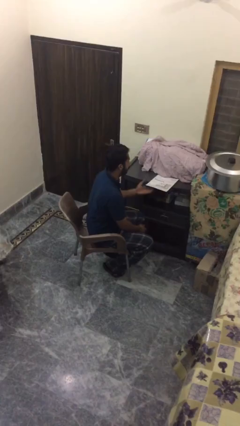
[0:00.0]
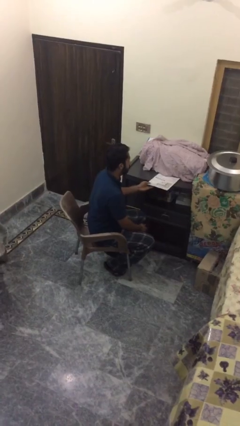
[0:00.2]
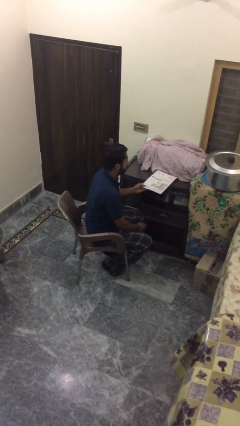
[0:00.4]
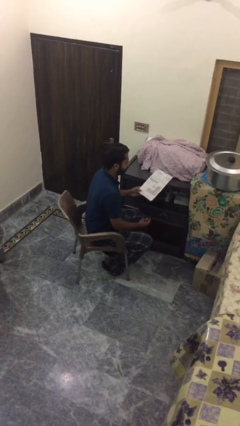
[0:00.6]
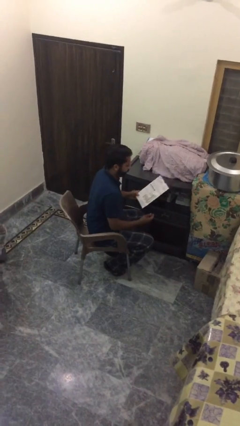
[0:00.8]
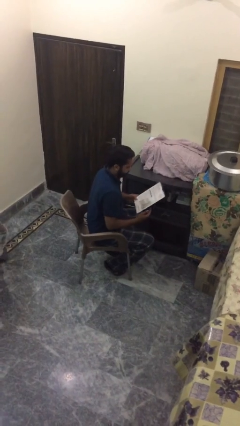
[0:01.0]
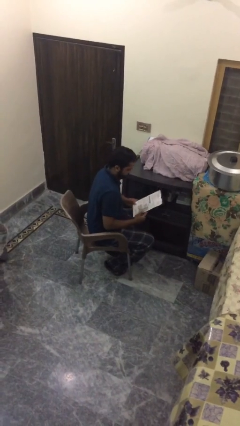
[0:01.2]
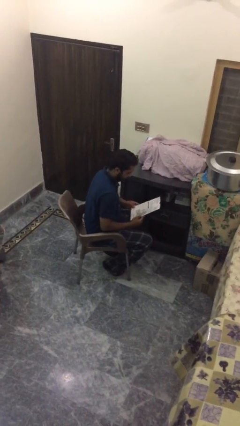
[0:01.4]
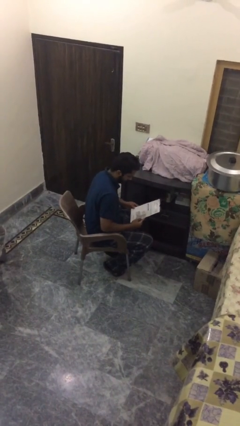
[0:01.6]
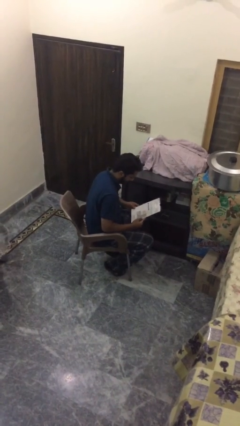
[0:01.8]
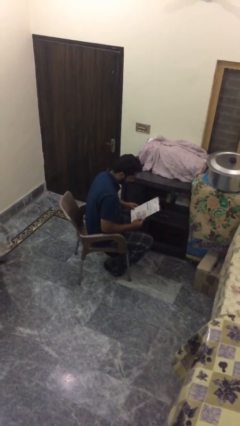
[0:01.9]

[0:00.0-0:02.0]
person picks up object from table

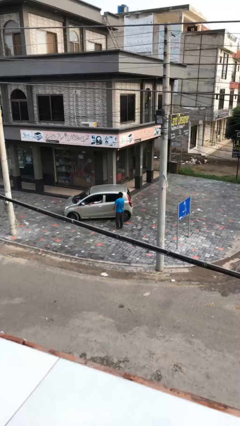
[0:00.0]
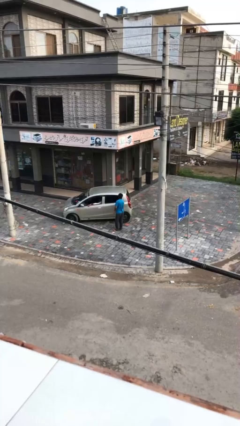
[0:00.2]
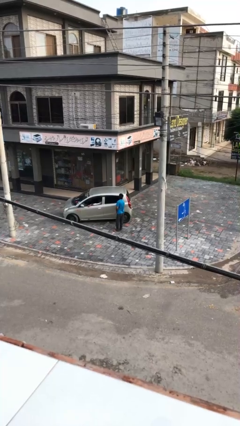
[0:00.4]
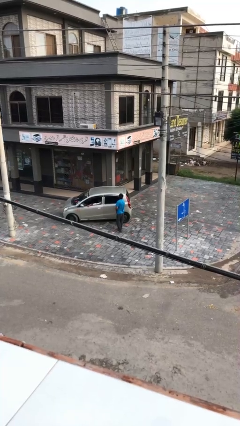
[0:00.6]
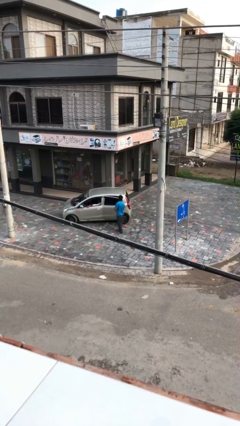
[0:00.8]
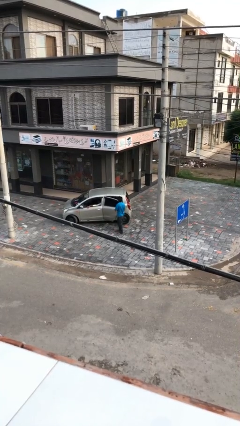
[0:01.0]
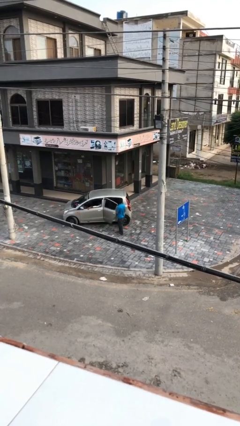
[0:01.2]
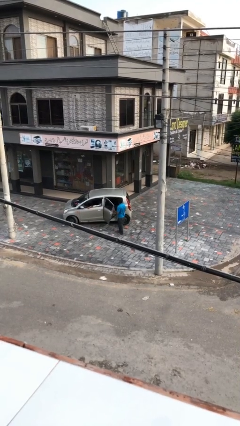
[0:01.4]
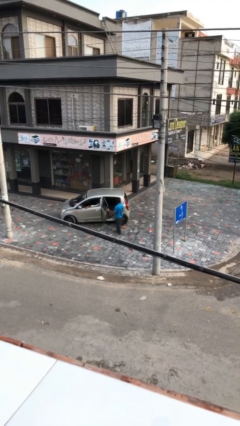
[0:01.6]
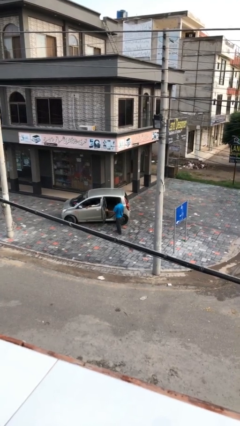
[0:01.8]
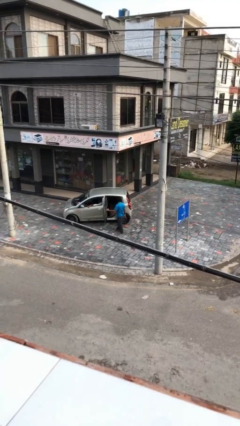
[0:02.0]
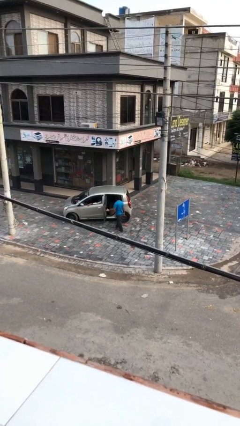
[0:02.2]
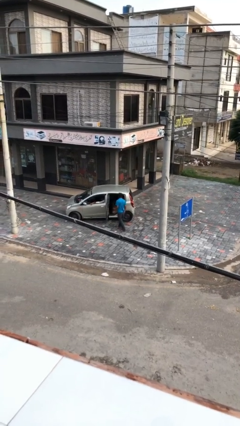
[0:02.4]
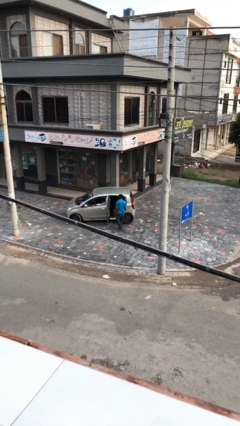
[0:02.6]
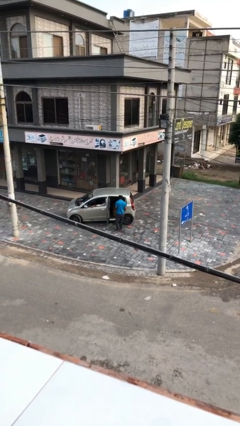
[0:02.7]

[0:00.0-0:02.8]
person opens car door

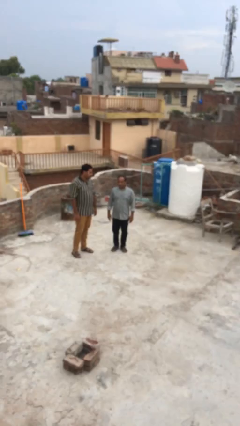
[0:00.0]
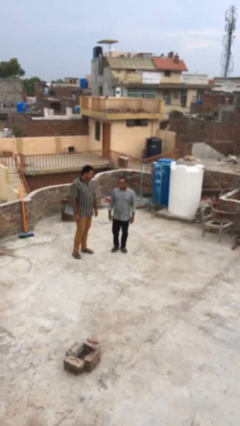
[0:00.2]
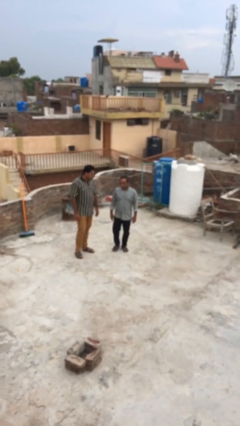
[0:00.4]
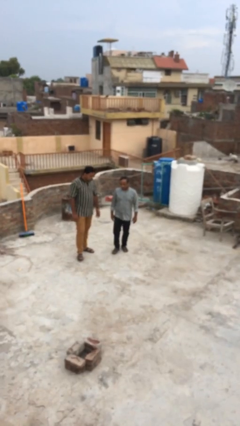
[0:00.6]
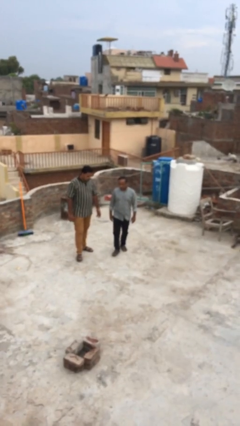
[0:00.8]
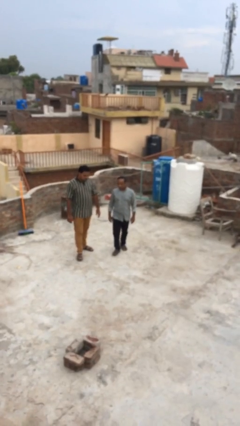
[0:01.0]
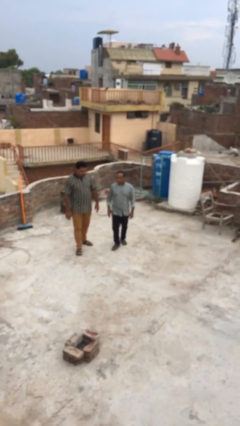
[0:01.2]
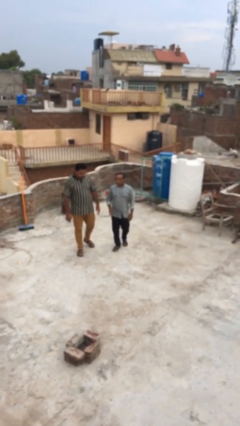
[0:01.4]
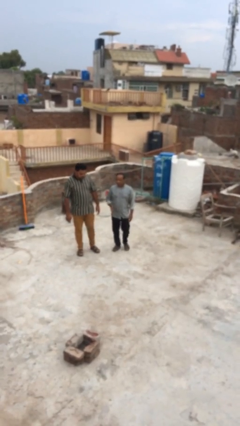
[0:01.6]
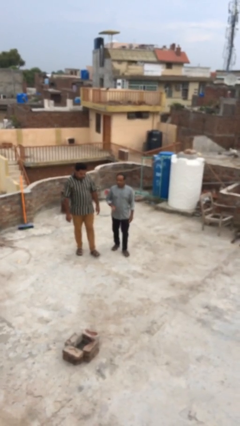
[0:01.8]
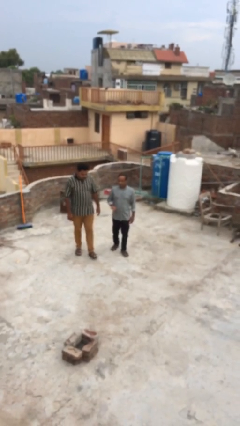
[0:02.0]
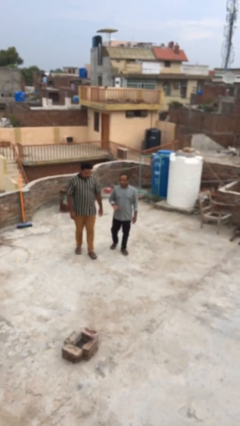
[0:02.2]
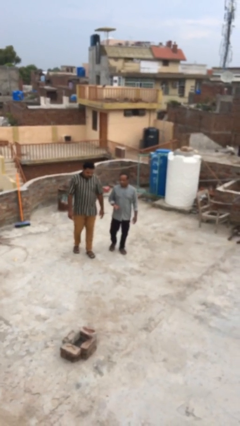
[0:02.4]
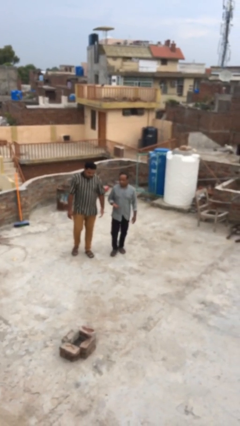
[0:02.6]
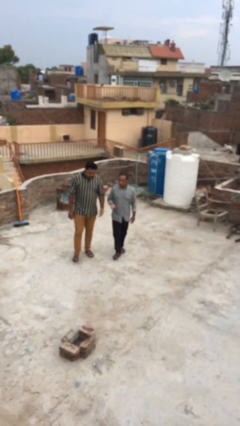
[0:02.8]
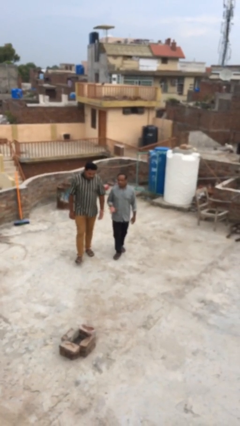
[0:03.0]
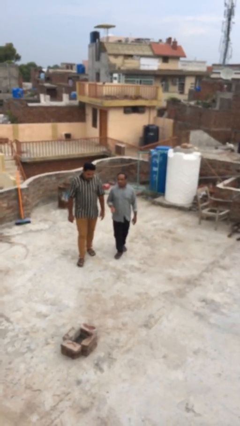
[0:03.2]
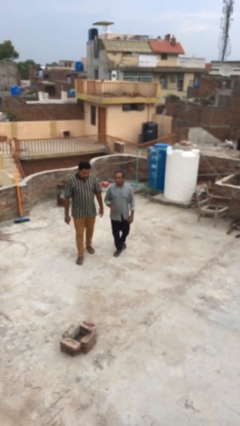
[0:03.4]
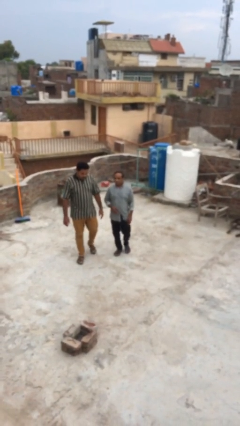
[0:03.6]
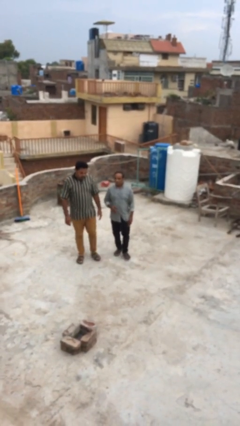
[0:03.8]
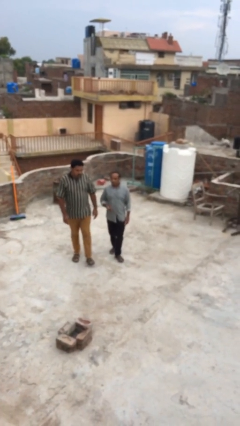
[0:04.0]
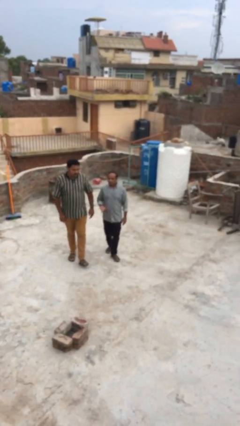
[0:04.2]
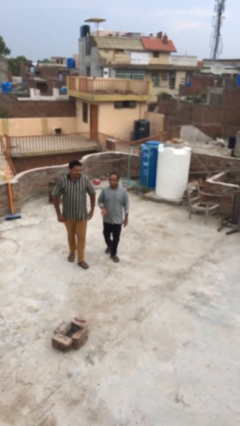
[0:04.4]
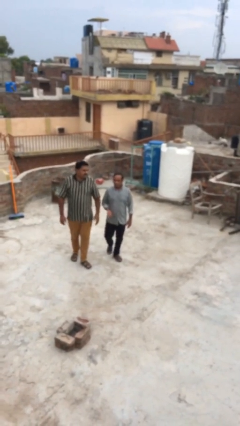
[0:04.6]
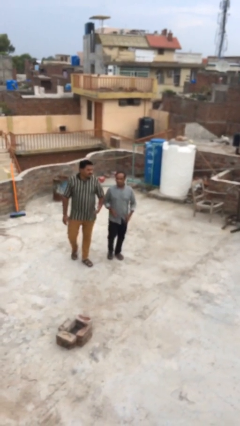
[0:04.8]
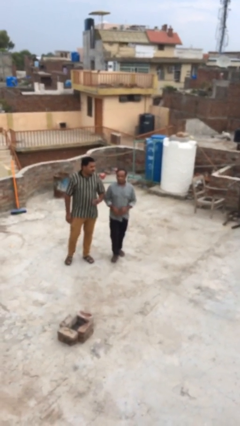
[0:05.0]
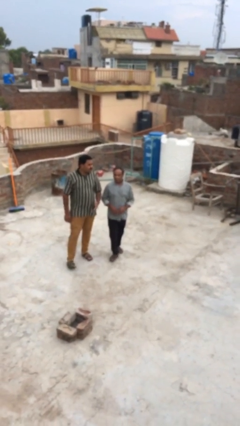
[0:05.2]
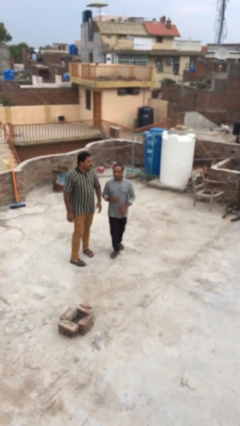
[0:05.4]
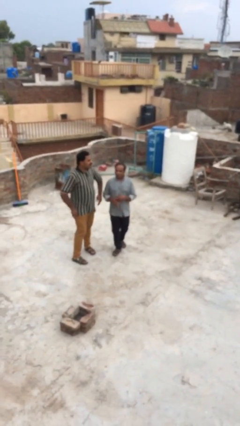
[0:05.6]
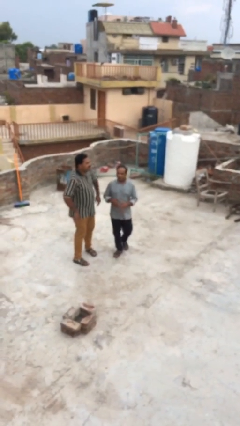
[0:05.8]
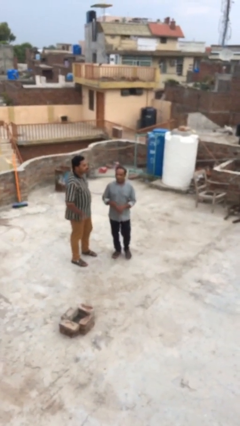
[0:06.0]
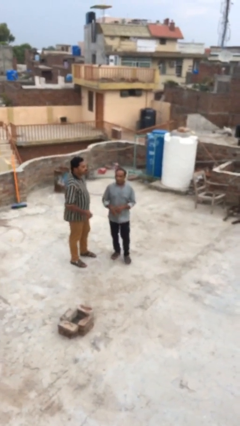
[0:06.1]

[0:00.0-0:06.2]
person talks to person

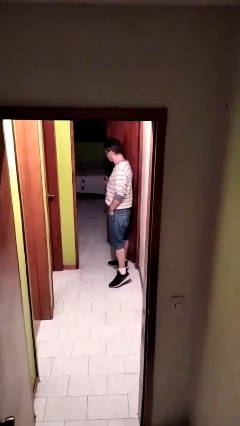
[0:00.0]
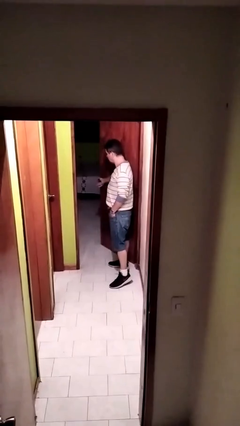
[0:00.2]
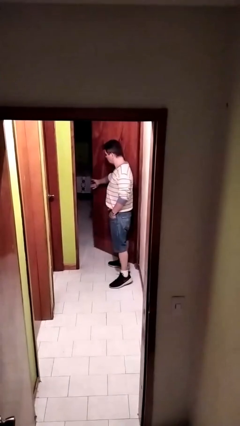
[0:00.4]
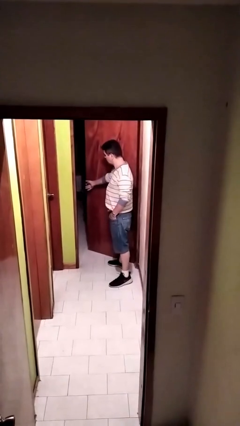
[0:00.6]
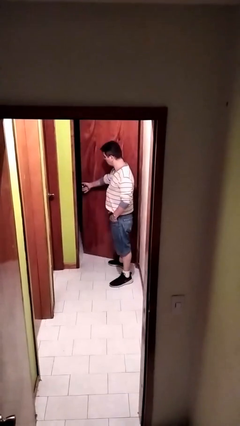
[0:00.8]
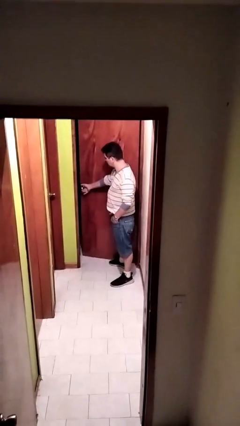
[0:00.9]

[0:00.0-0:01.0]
person closes facility door

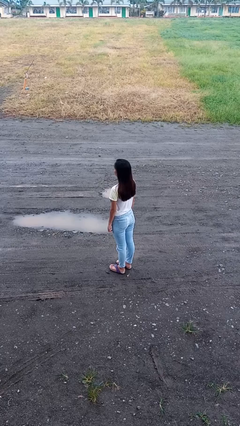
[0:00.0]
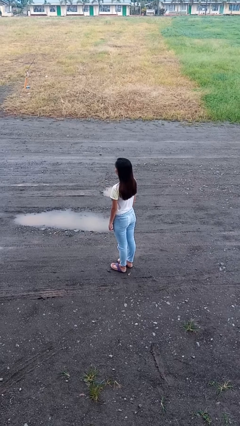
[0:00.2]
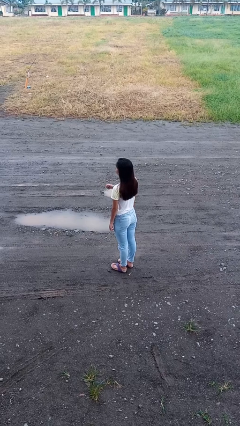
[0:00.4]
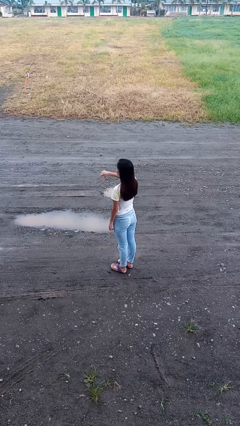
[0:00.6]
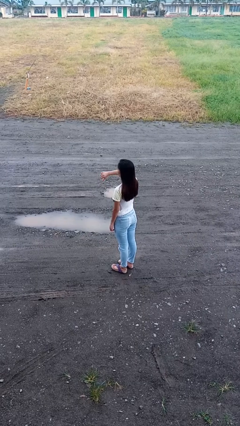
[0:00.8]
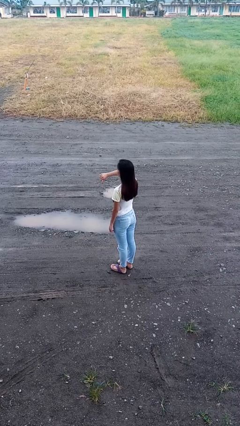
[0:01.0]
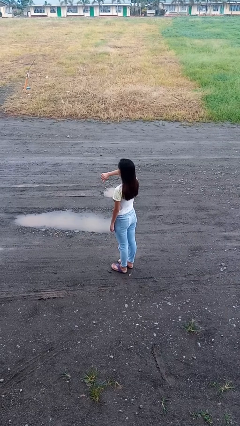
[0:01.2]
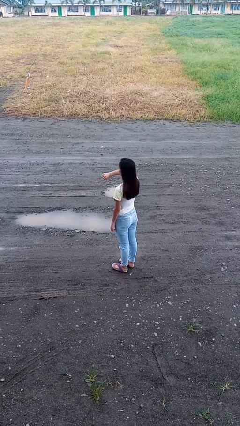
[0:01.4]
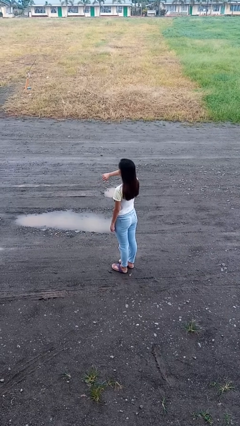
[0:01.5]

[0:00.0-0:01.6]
person gestures thumbs down

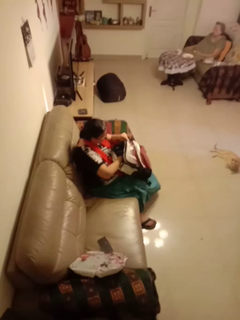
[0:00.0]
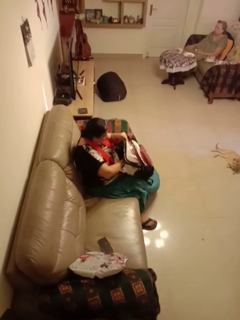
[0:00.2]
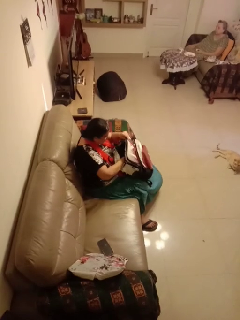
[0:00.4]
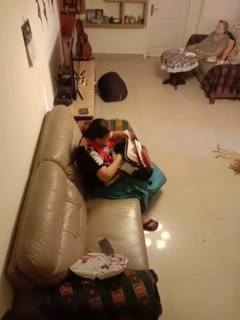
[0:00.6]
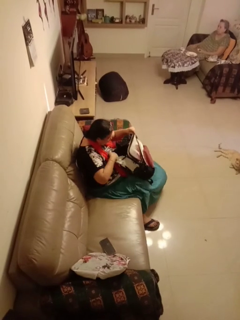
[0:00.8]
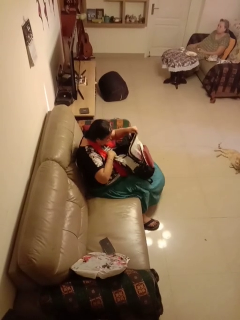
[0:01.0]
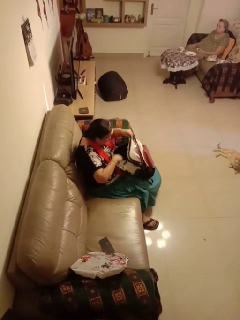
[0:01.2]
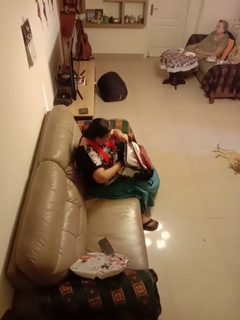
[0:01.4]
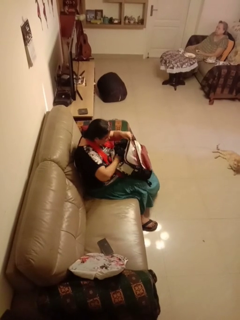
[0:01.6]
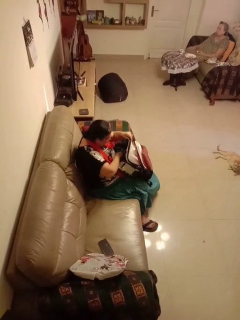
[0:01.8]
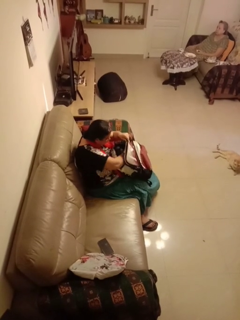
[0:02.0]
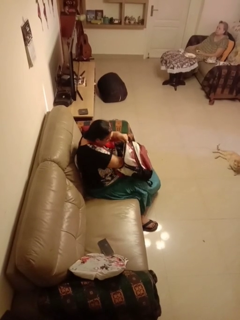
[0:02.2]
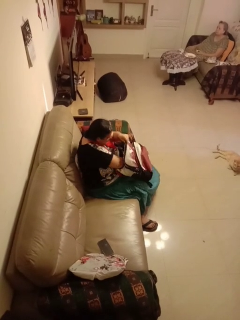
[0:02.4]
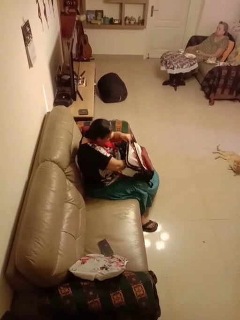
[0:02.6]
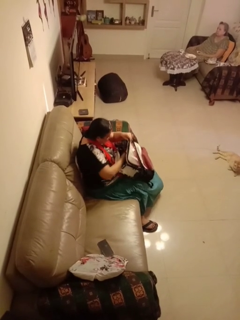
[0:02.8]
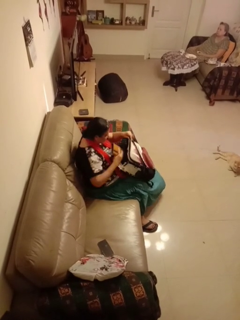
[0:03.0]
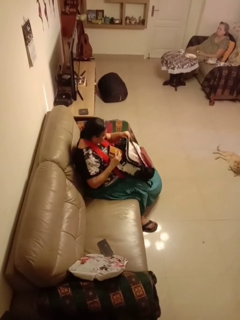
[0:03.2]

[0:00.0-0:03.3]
person searches in backpack

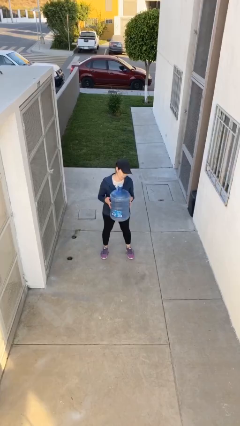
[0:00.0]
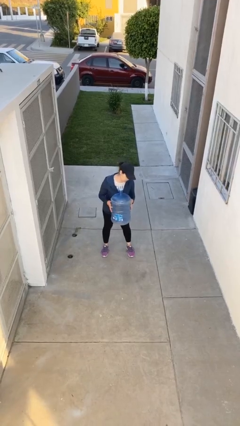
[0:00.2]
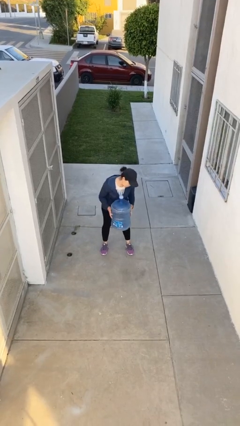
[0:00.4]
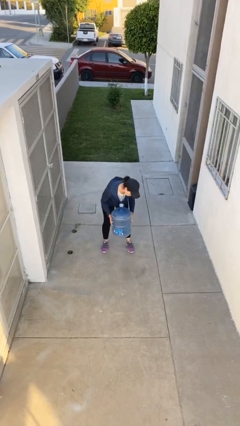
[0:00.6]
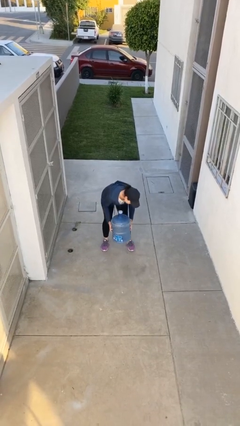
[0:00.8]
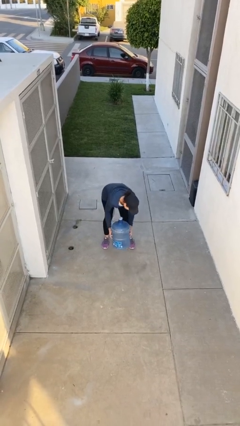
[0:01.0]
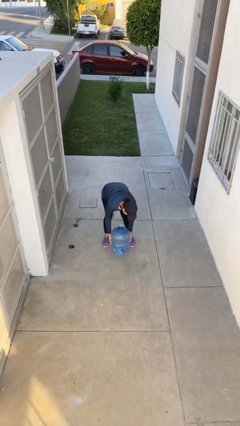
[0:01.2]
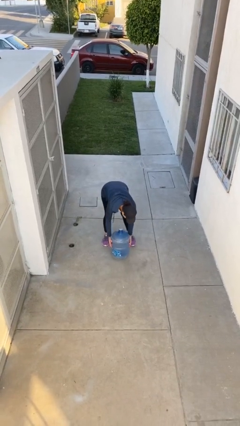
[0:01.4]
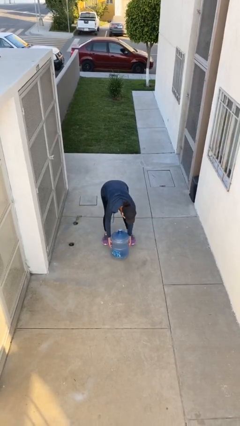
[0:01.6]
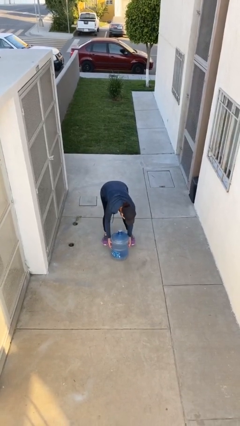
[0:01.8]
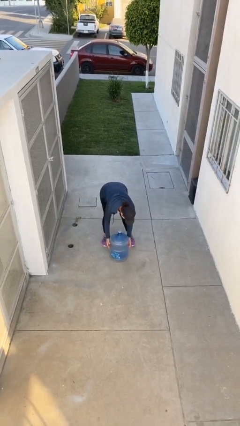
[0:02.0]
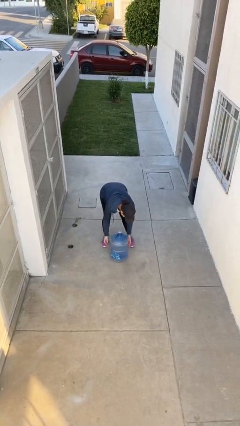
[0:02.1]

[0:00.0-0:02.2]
person puts down object on floor
